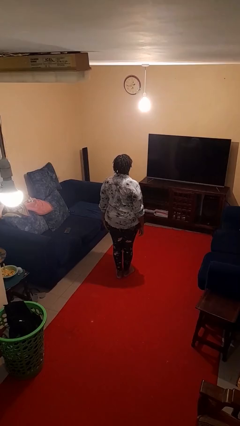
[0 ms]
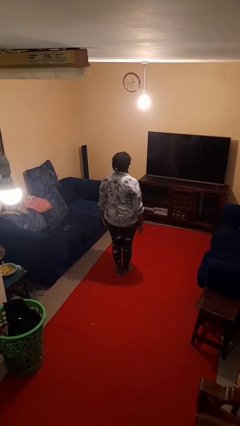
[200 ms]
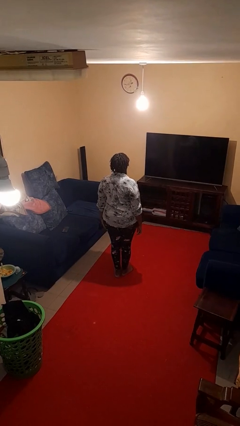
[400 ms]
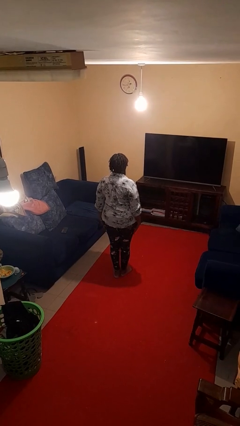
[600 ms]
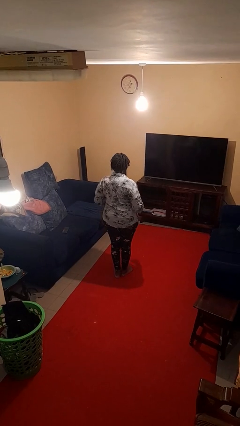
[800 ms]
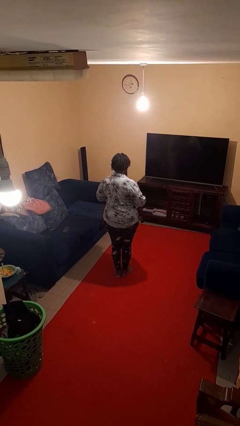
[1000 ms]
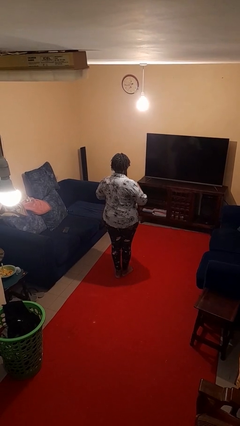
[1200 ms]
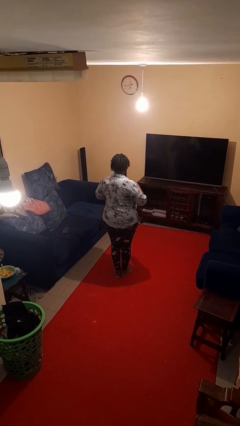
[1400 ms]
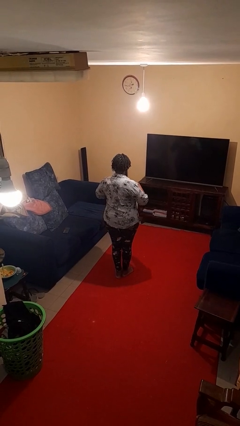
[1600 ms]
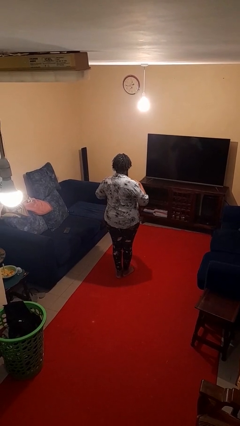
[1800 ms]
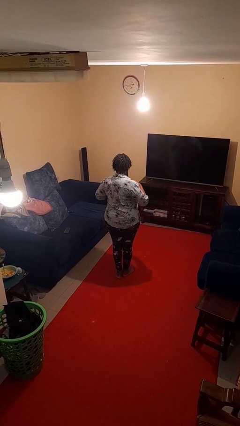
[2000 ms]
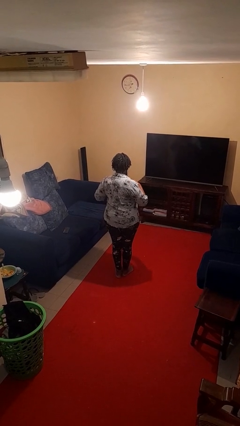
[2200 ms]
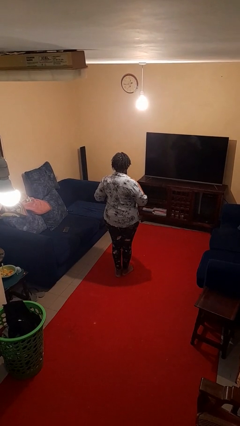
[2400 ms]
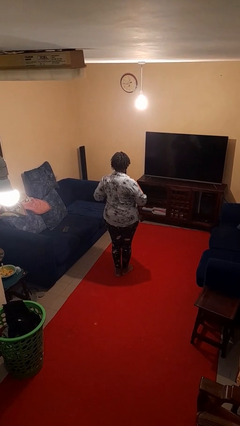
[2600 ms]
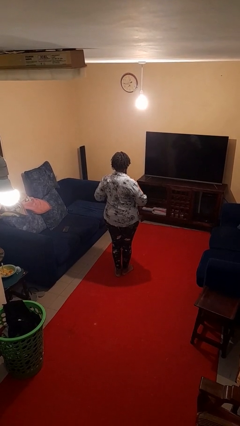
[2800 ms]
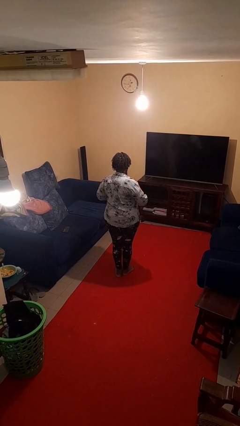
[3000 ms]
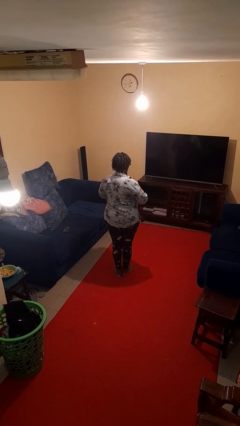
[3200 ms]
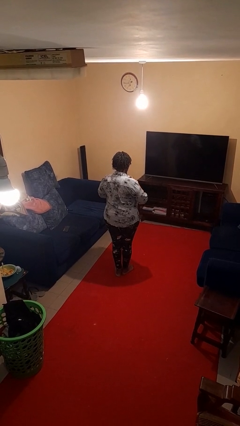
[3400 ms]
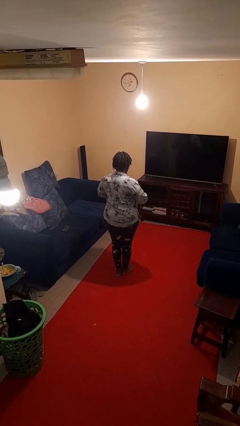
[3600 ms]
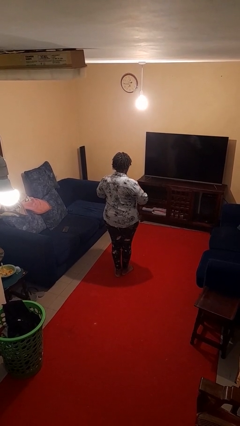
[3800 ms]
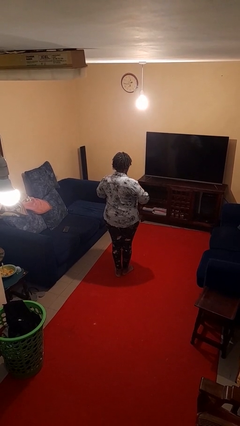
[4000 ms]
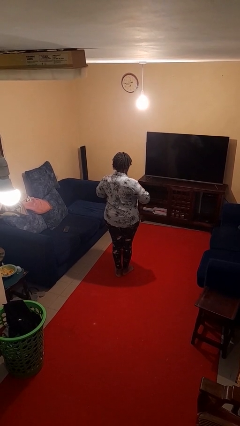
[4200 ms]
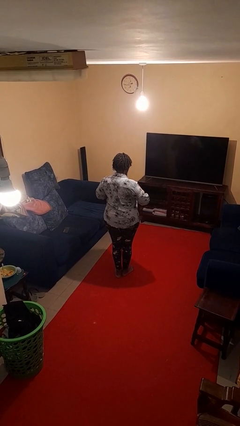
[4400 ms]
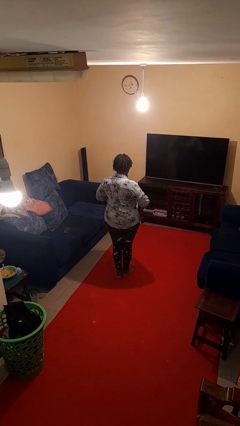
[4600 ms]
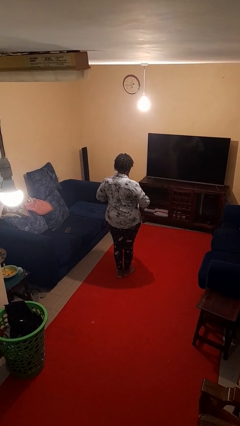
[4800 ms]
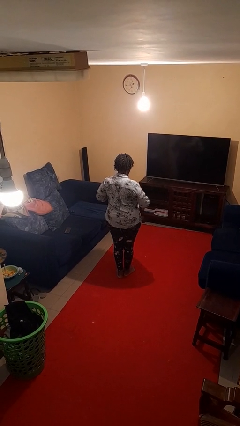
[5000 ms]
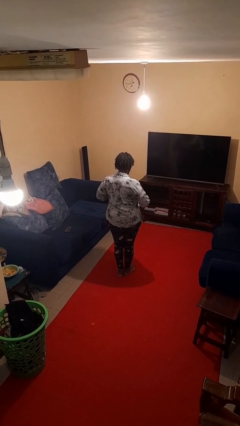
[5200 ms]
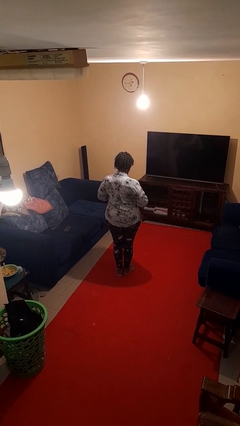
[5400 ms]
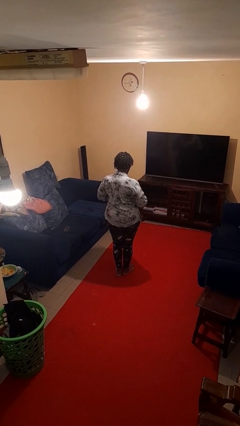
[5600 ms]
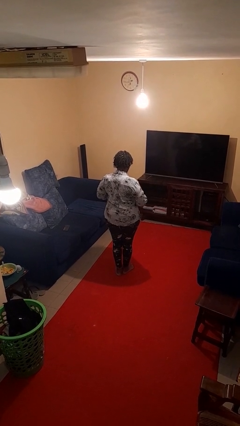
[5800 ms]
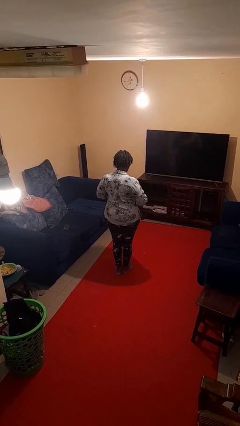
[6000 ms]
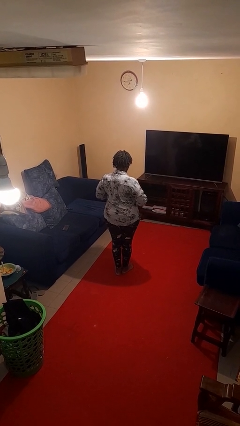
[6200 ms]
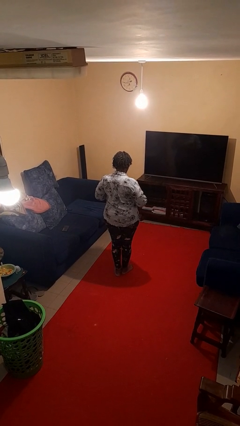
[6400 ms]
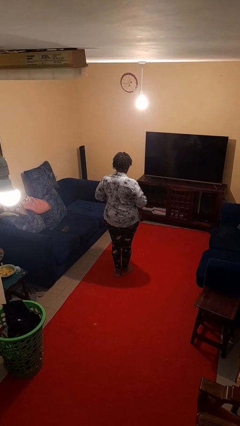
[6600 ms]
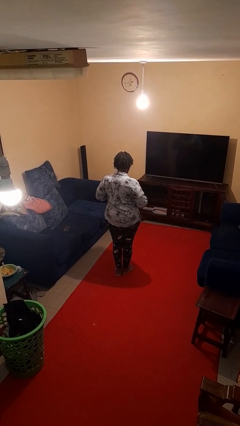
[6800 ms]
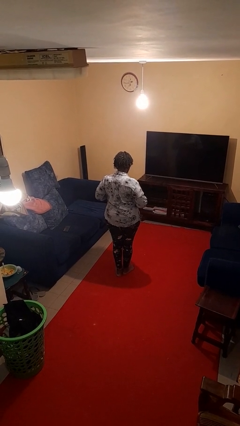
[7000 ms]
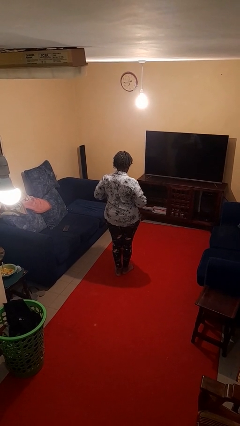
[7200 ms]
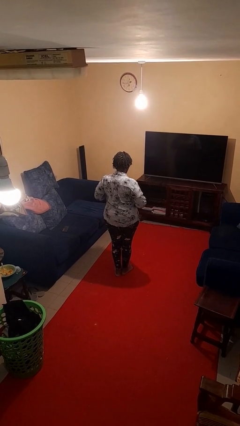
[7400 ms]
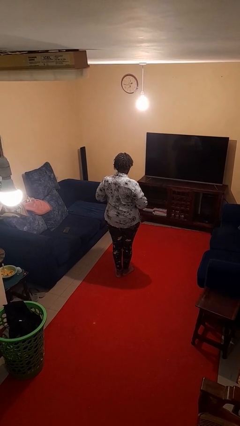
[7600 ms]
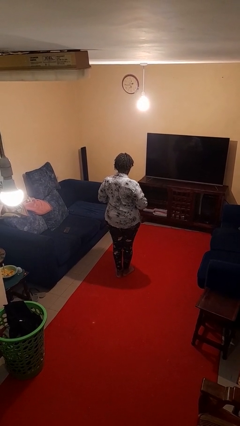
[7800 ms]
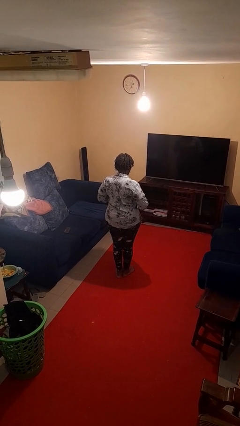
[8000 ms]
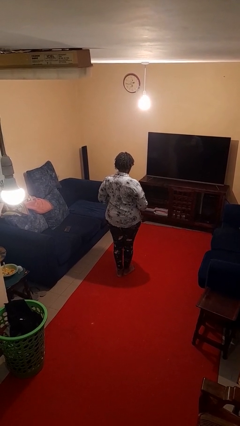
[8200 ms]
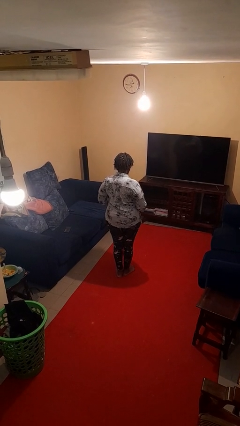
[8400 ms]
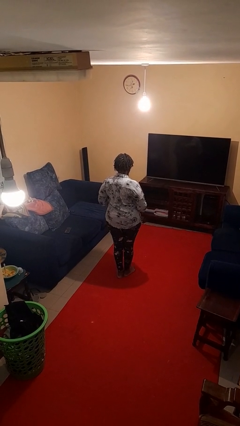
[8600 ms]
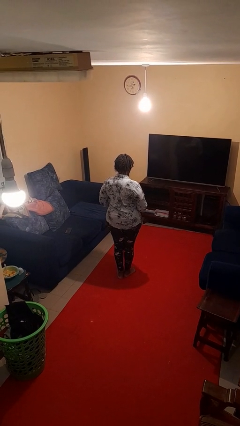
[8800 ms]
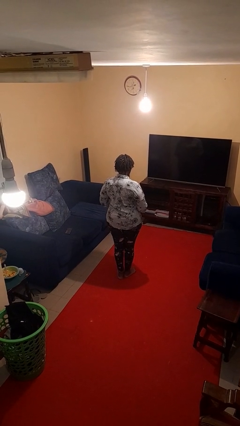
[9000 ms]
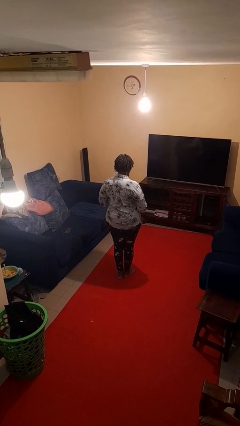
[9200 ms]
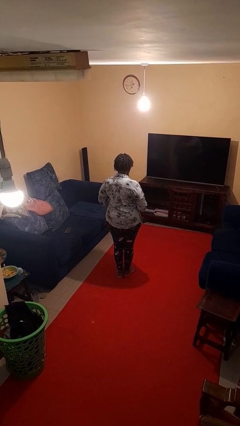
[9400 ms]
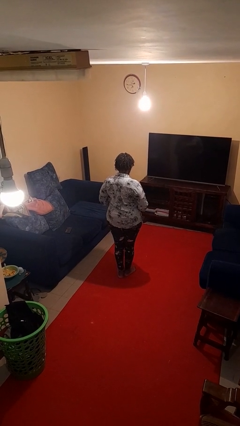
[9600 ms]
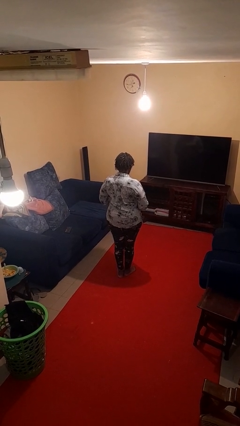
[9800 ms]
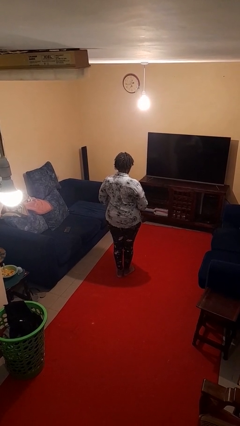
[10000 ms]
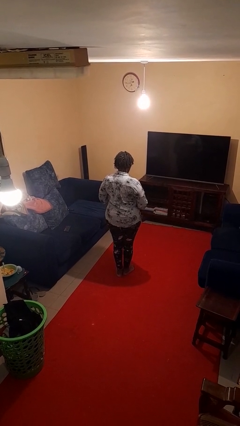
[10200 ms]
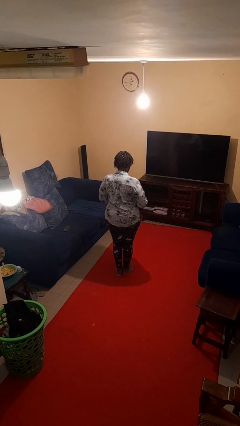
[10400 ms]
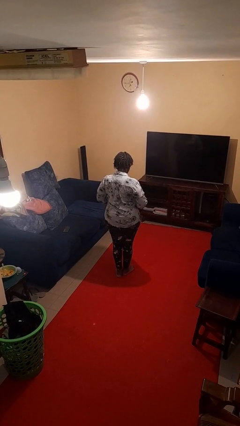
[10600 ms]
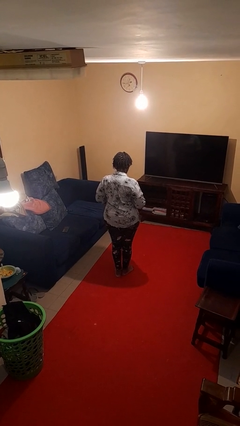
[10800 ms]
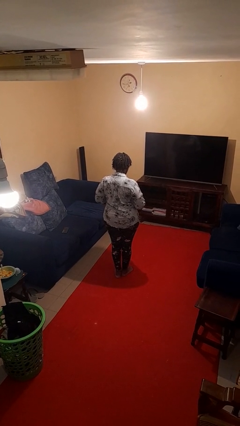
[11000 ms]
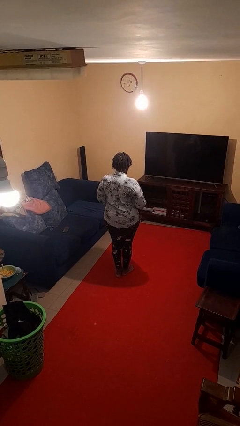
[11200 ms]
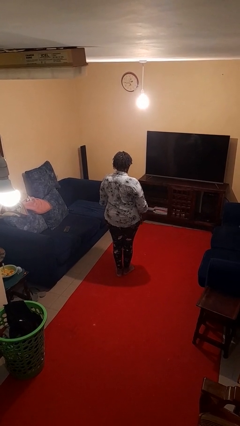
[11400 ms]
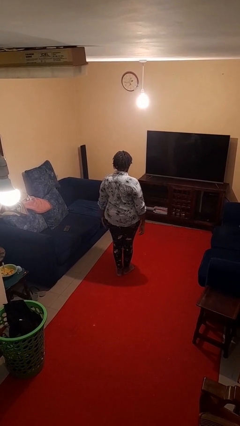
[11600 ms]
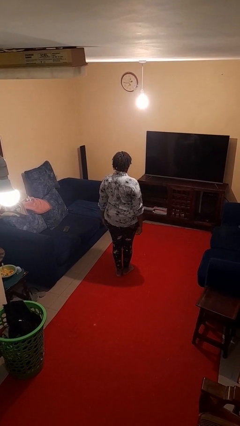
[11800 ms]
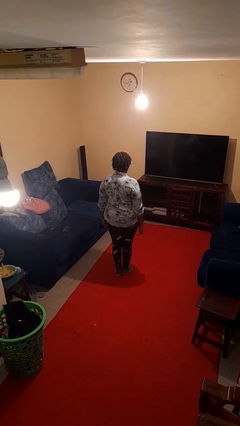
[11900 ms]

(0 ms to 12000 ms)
person buttons shirt

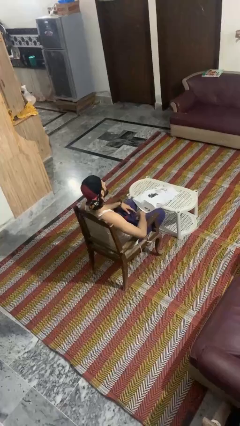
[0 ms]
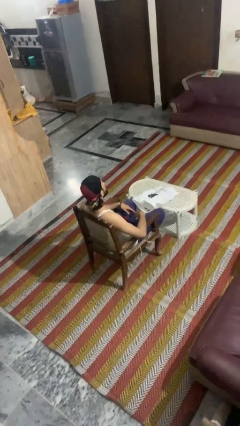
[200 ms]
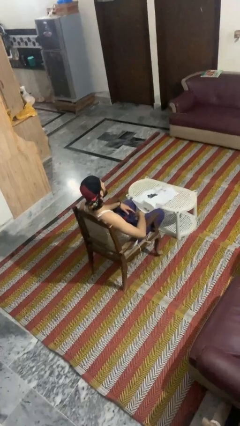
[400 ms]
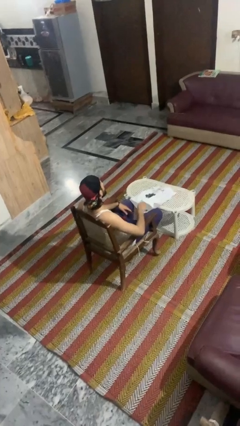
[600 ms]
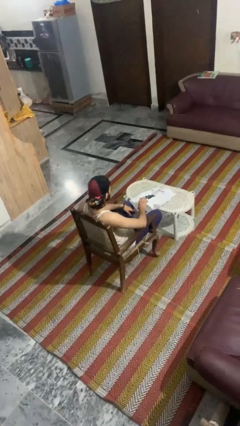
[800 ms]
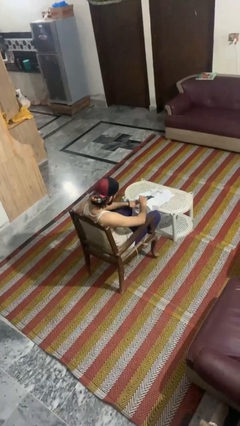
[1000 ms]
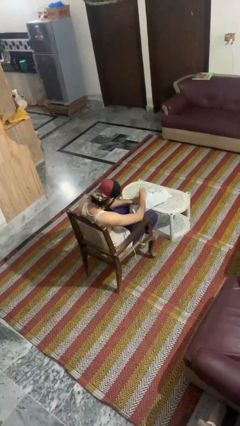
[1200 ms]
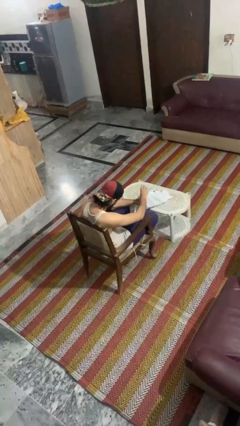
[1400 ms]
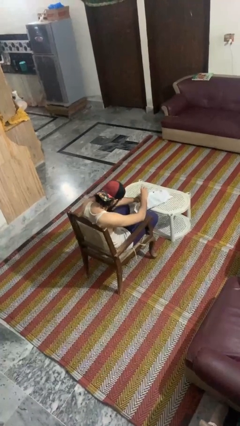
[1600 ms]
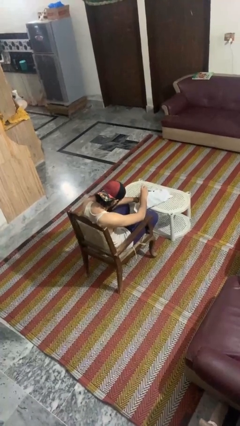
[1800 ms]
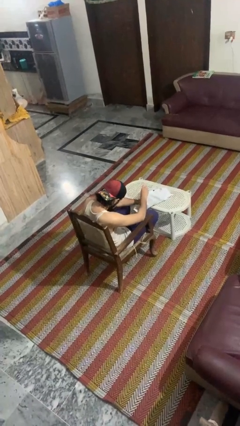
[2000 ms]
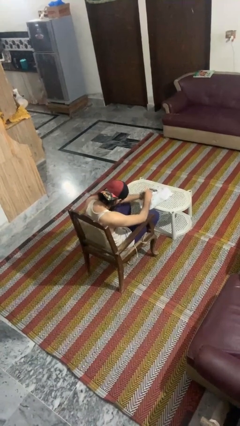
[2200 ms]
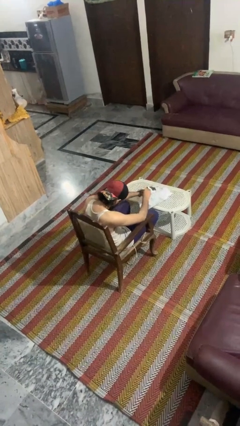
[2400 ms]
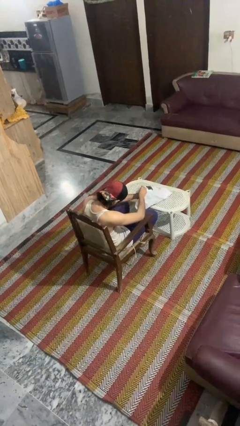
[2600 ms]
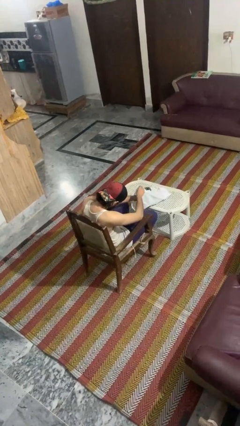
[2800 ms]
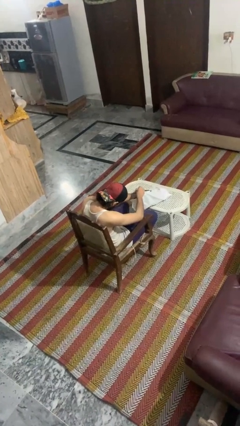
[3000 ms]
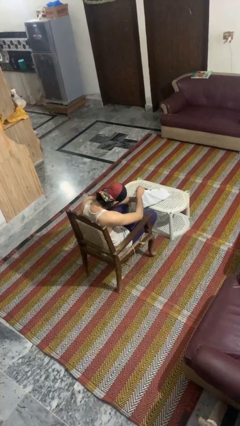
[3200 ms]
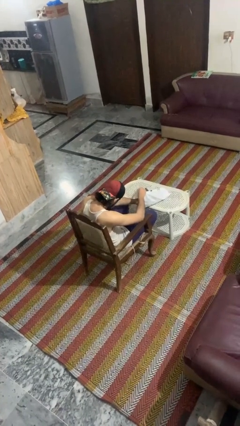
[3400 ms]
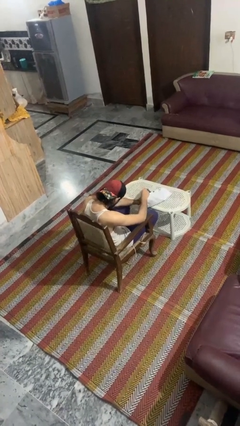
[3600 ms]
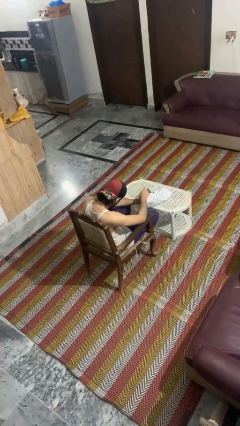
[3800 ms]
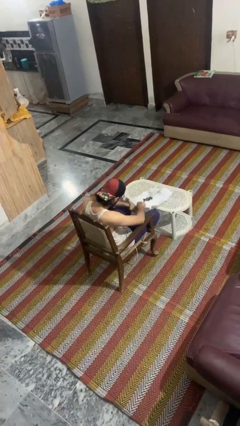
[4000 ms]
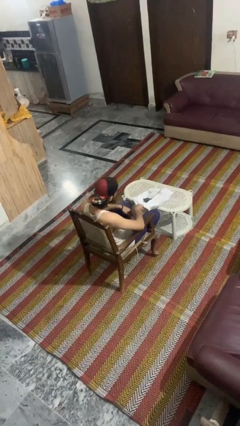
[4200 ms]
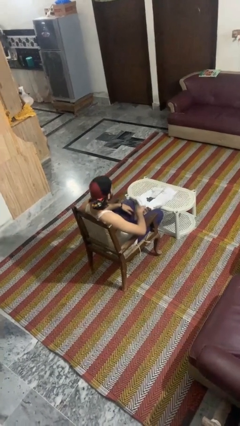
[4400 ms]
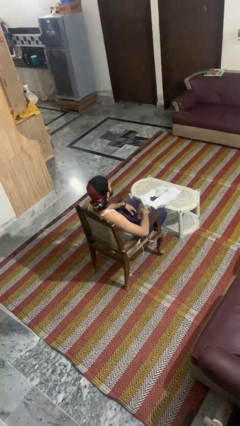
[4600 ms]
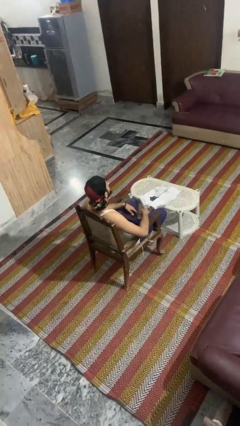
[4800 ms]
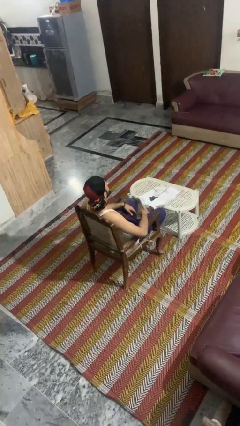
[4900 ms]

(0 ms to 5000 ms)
person searches in bag

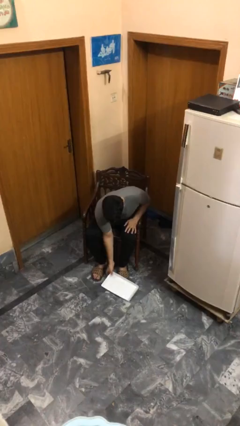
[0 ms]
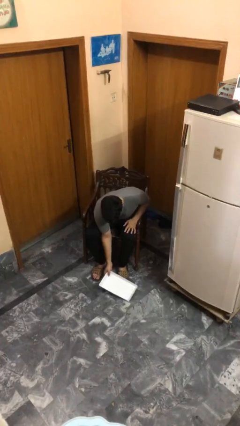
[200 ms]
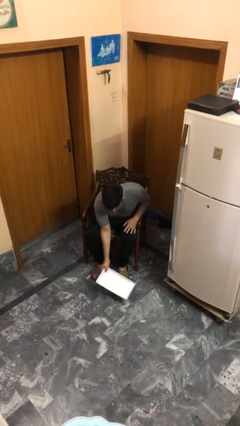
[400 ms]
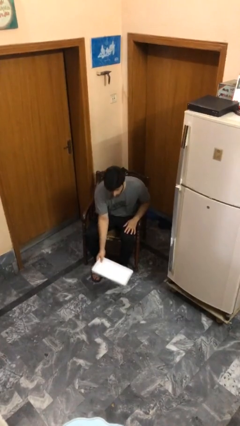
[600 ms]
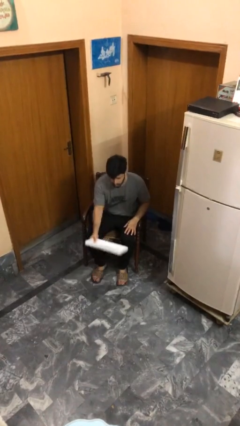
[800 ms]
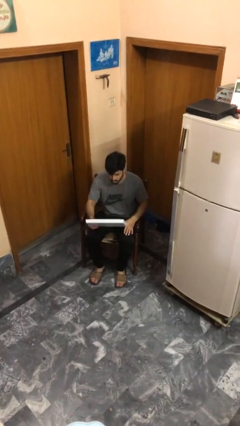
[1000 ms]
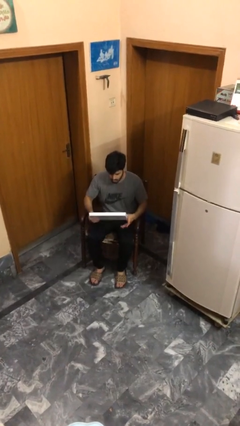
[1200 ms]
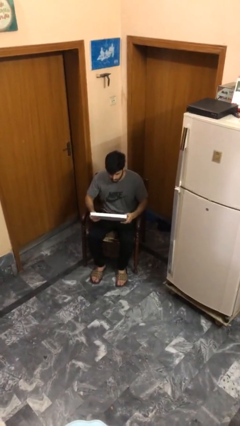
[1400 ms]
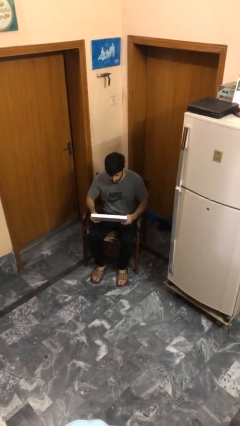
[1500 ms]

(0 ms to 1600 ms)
person picks up object from floor
